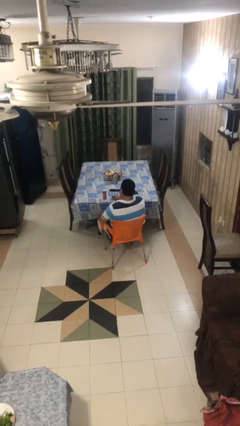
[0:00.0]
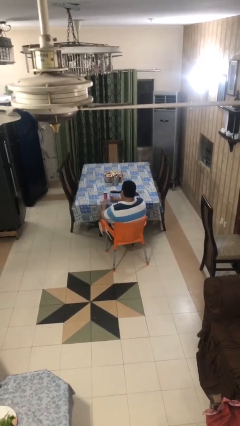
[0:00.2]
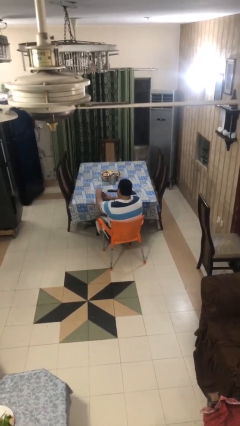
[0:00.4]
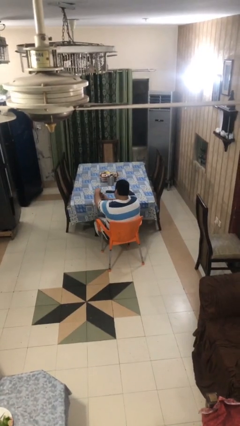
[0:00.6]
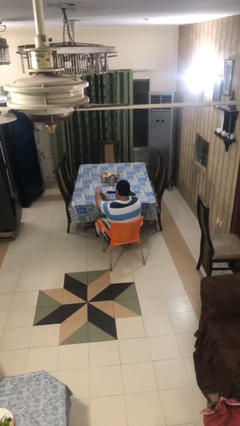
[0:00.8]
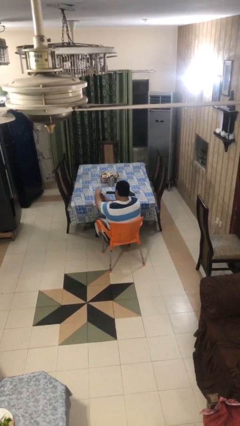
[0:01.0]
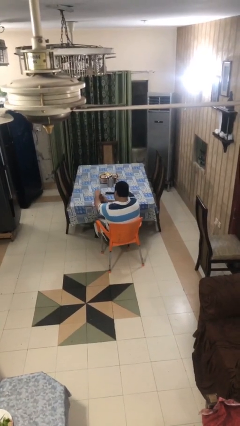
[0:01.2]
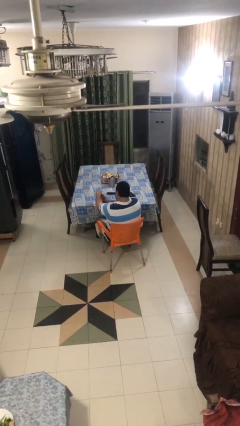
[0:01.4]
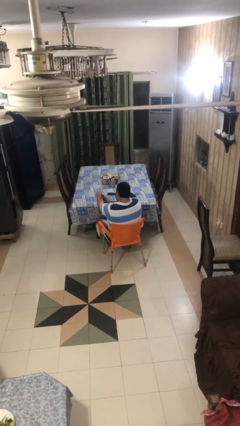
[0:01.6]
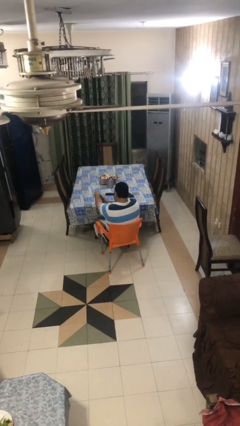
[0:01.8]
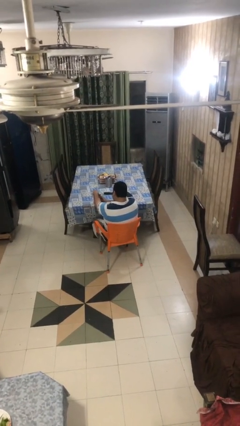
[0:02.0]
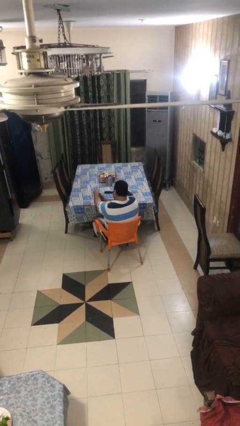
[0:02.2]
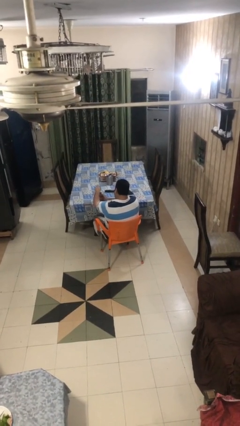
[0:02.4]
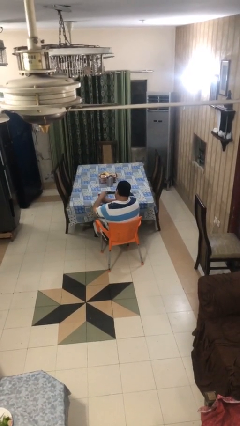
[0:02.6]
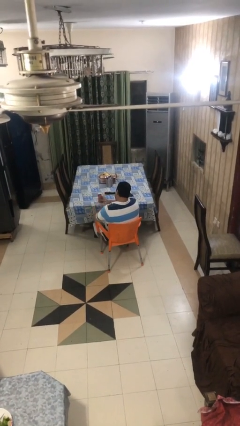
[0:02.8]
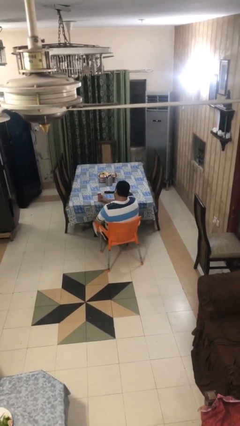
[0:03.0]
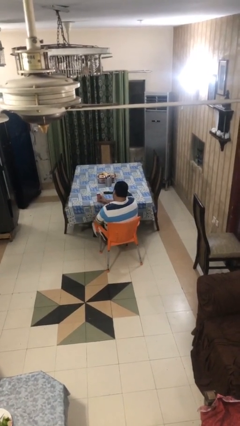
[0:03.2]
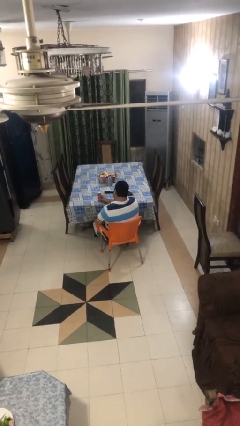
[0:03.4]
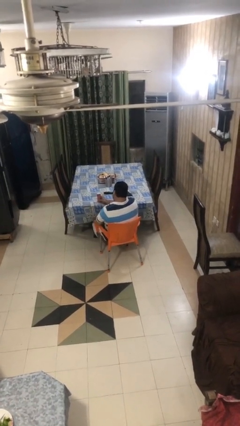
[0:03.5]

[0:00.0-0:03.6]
person opens beverage can

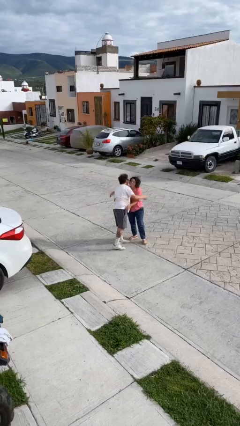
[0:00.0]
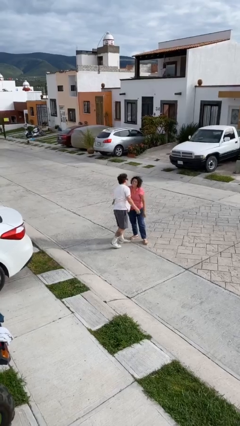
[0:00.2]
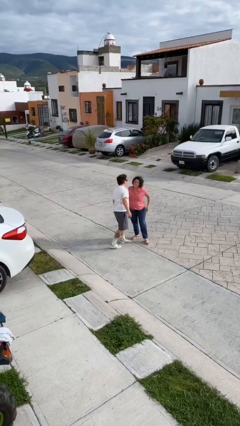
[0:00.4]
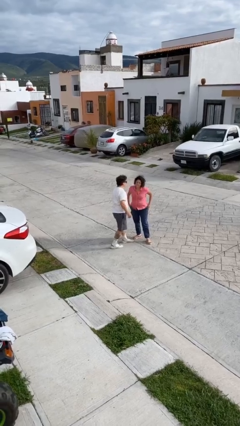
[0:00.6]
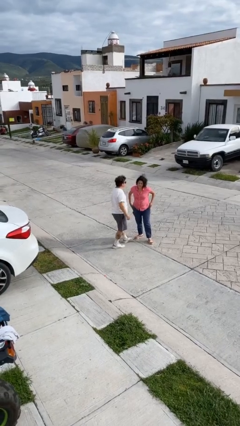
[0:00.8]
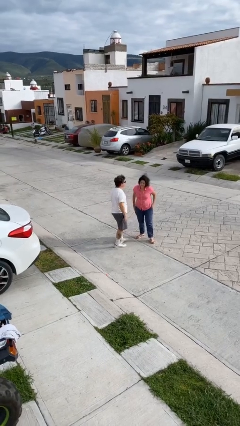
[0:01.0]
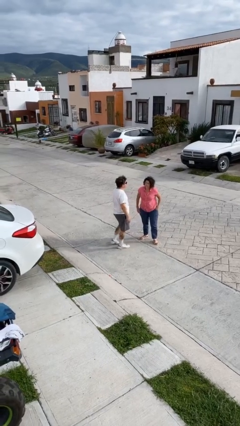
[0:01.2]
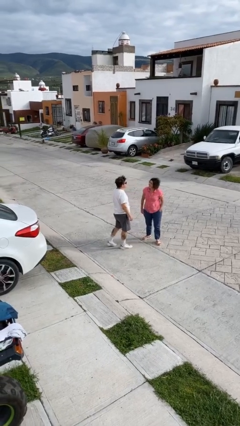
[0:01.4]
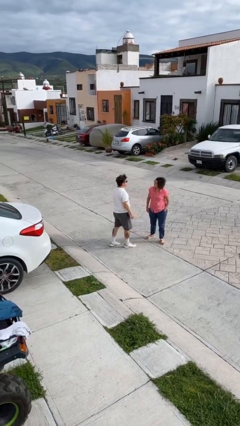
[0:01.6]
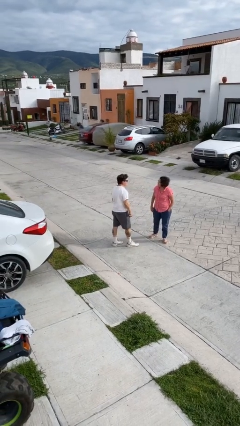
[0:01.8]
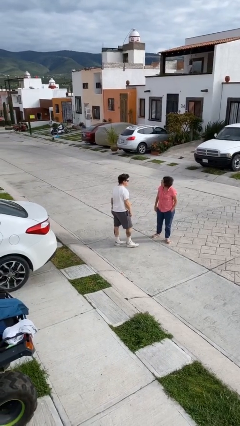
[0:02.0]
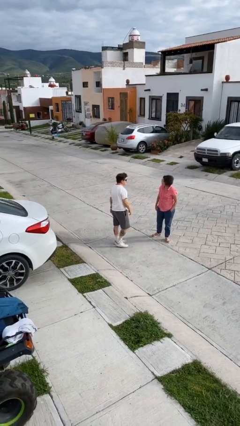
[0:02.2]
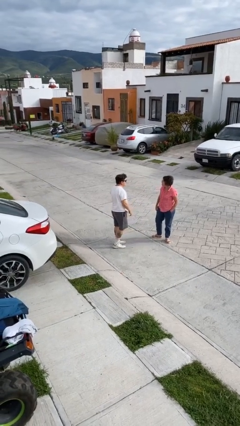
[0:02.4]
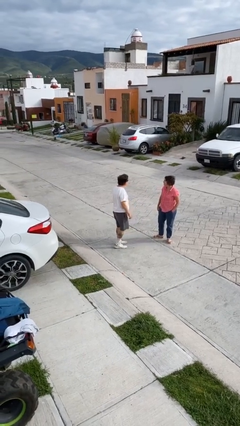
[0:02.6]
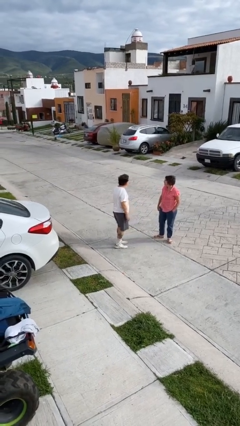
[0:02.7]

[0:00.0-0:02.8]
person talks to person

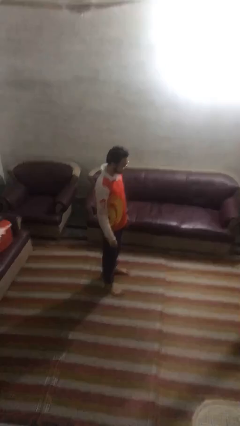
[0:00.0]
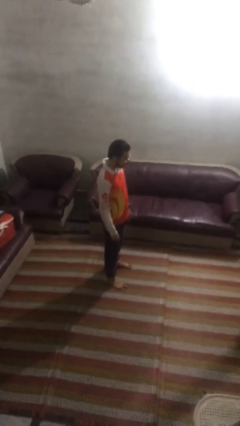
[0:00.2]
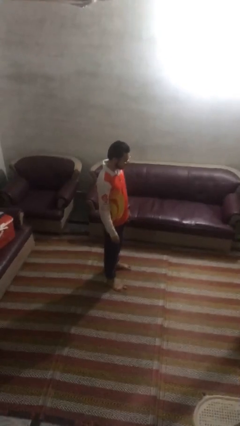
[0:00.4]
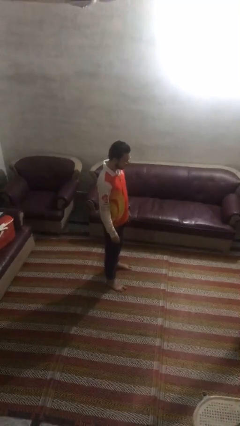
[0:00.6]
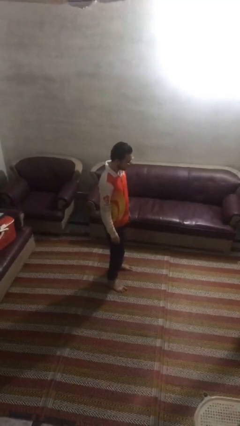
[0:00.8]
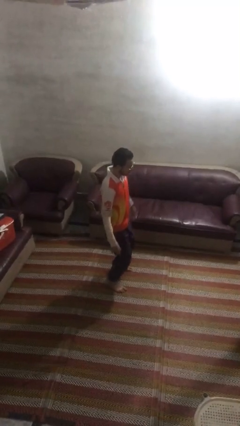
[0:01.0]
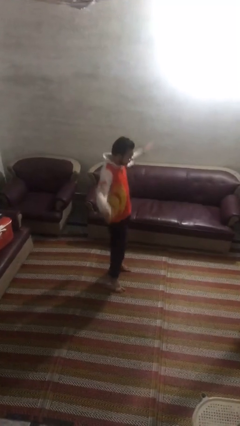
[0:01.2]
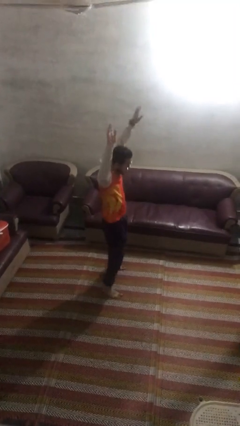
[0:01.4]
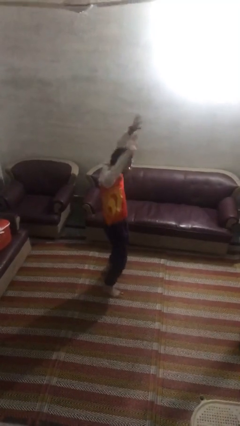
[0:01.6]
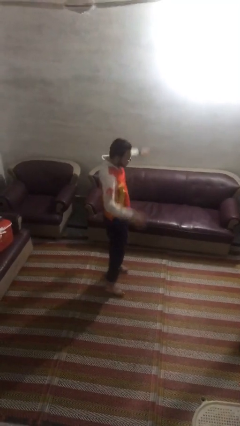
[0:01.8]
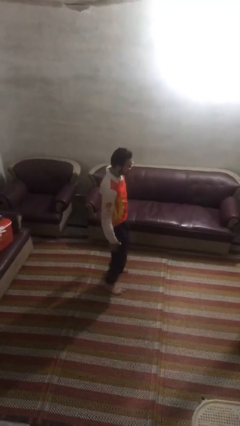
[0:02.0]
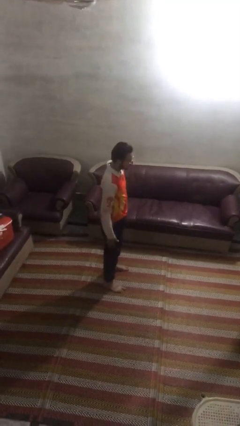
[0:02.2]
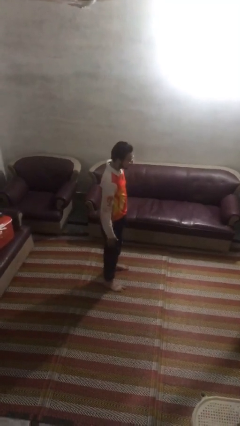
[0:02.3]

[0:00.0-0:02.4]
person exercises with jumping jacks

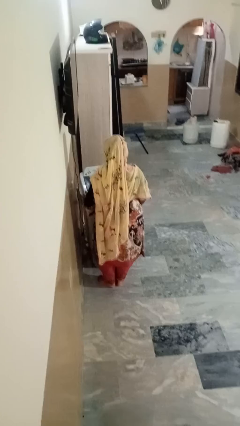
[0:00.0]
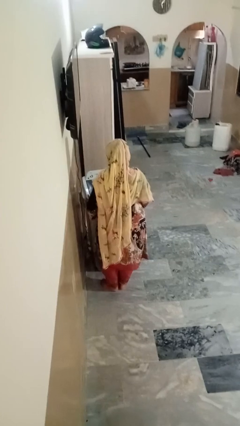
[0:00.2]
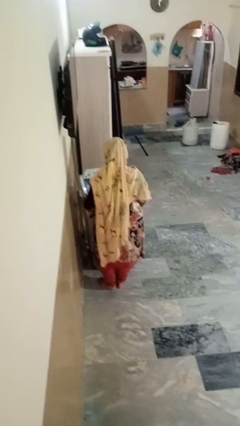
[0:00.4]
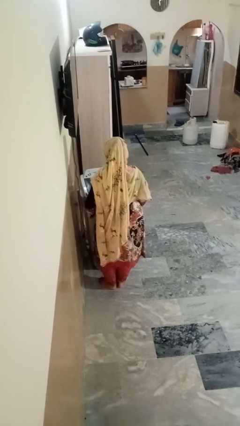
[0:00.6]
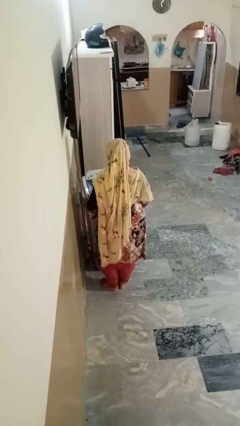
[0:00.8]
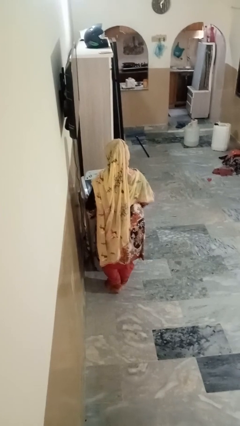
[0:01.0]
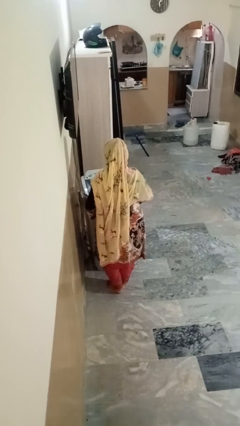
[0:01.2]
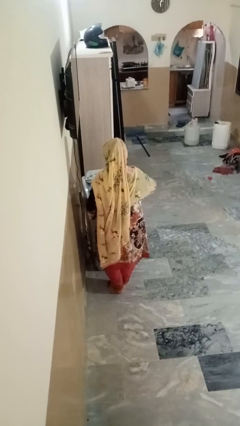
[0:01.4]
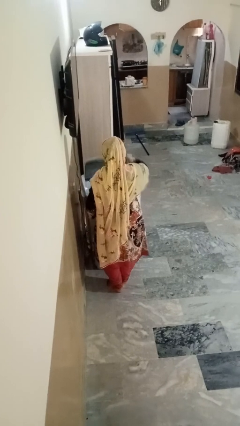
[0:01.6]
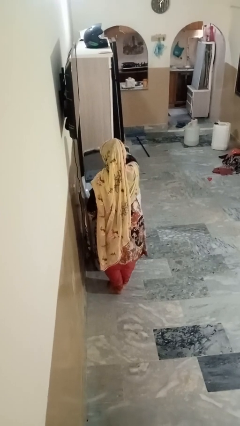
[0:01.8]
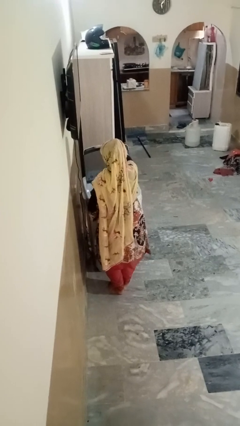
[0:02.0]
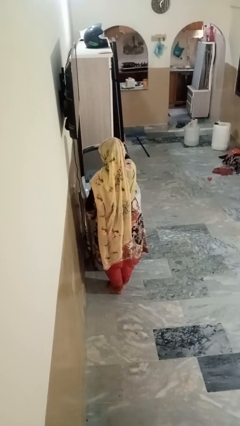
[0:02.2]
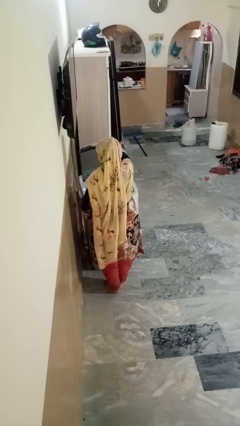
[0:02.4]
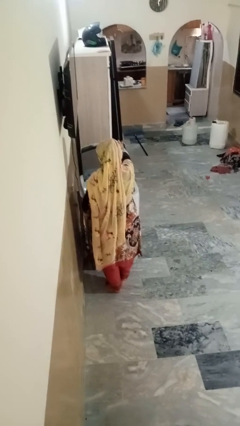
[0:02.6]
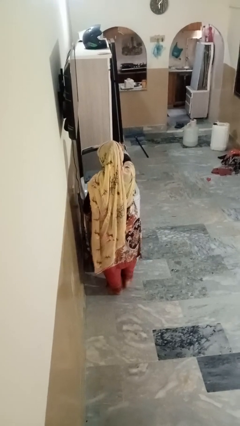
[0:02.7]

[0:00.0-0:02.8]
person opens clothes washer

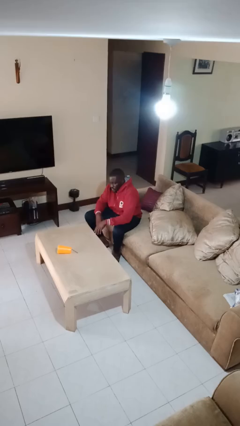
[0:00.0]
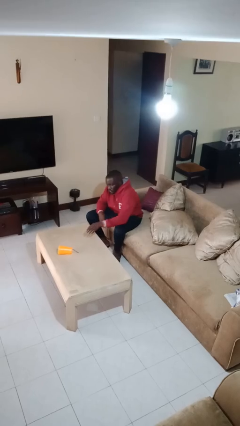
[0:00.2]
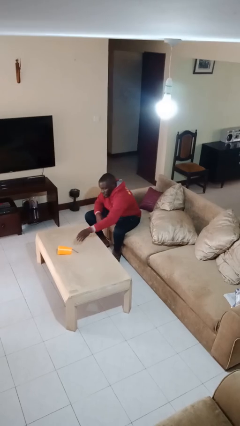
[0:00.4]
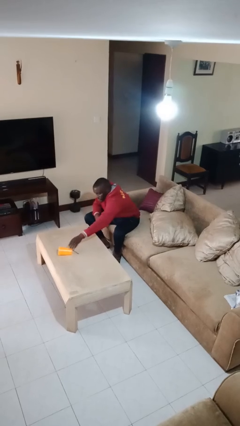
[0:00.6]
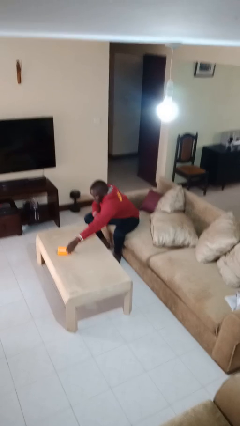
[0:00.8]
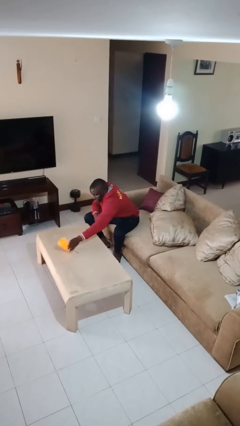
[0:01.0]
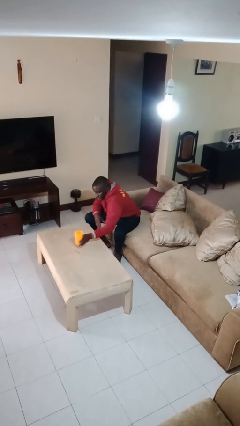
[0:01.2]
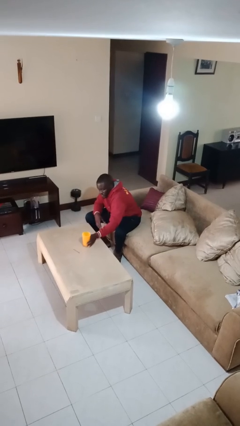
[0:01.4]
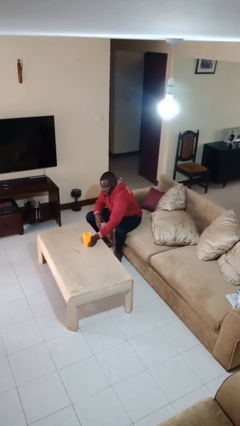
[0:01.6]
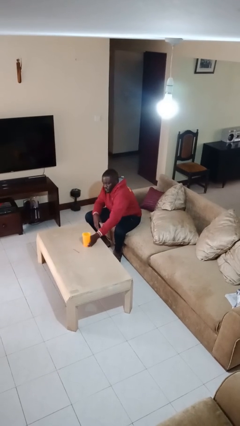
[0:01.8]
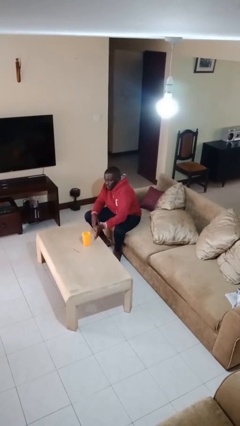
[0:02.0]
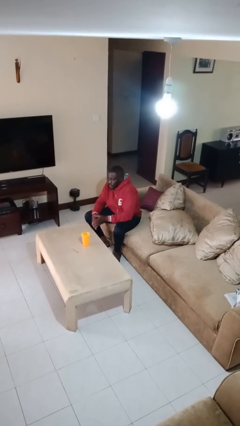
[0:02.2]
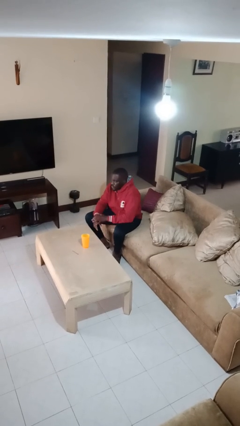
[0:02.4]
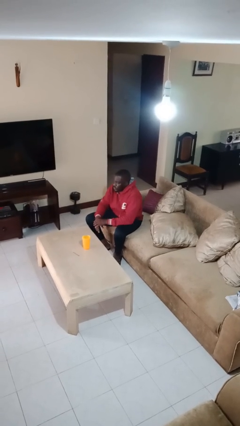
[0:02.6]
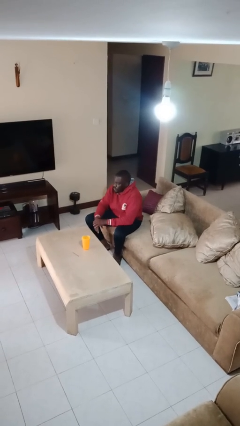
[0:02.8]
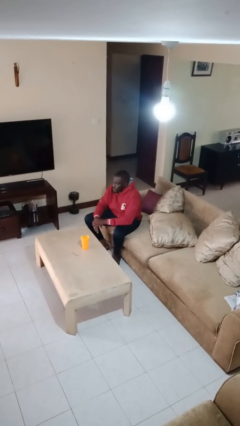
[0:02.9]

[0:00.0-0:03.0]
person sets upright glass

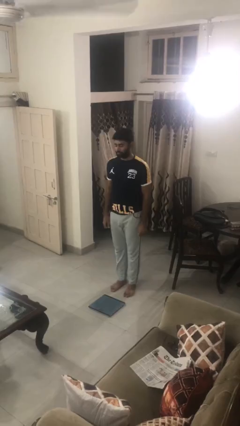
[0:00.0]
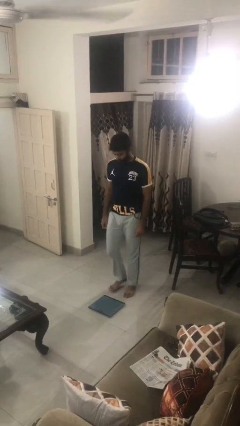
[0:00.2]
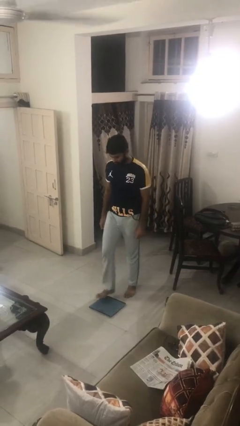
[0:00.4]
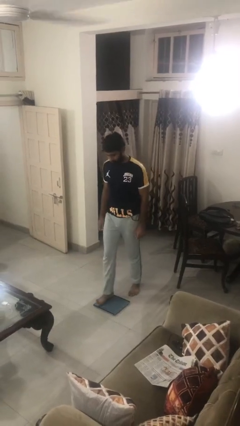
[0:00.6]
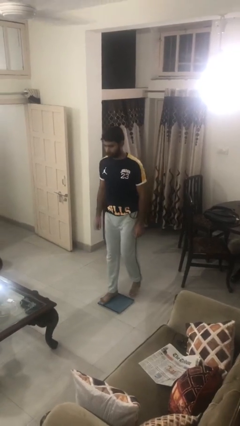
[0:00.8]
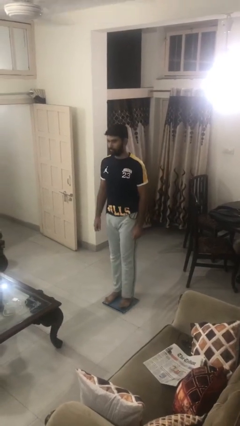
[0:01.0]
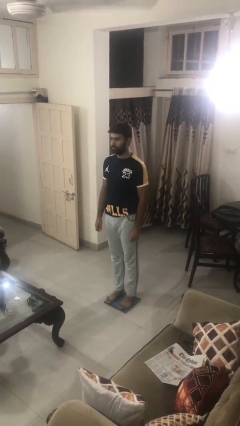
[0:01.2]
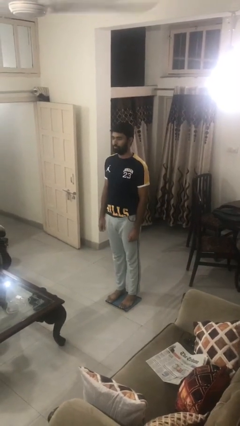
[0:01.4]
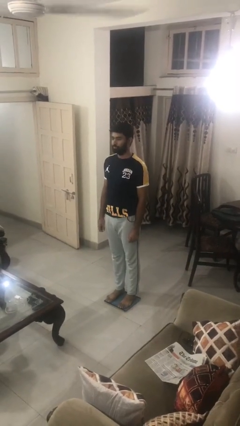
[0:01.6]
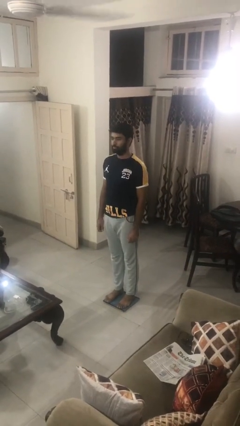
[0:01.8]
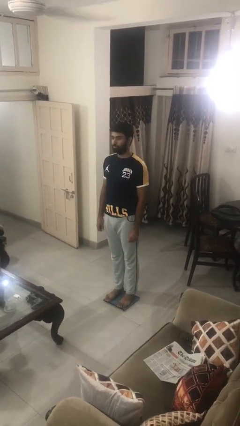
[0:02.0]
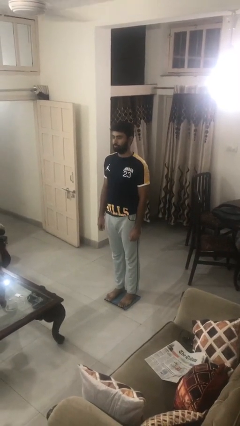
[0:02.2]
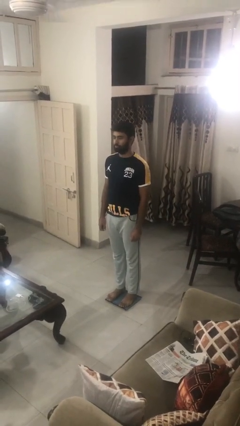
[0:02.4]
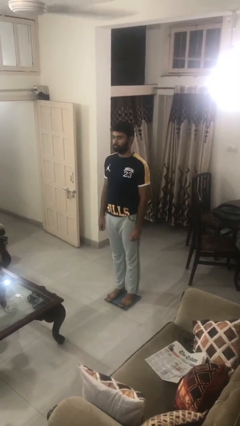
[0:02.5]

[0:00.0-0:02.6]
person uses bodyweight scale

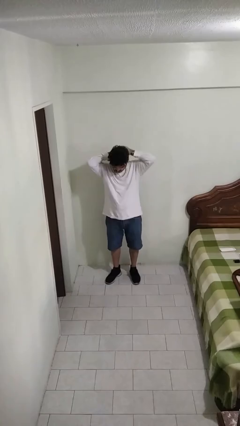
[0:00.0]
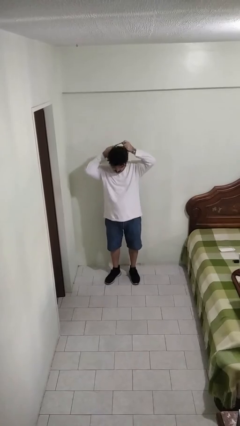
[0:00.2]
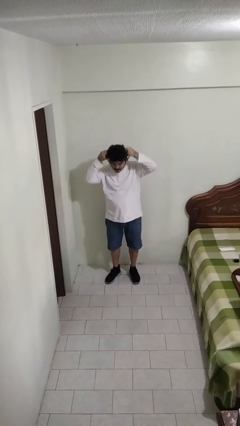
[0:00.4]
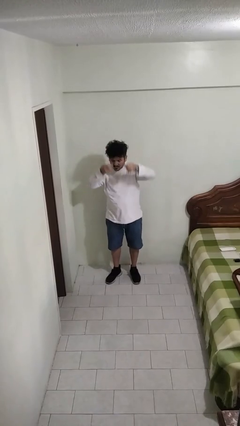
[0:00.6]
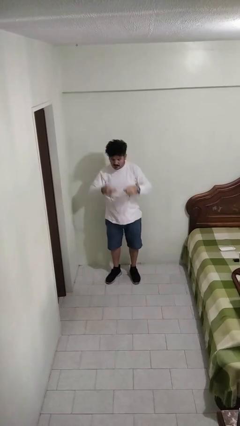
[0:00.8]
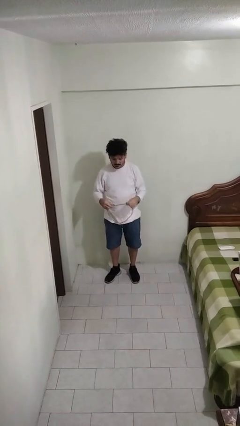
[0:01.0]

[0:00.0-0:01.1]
person takes off necklace
